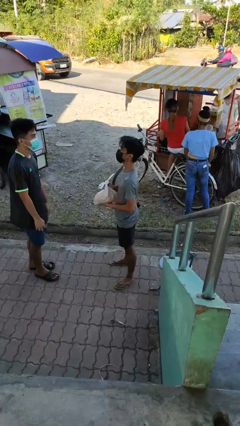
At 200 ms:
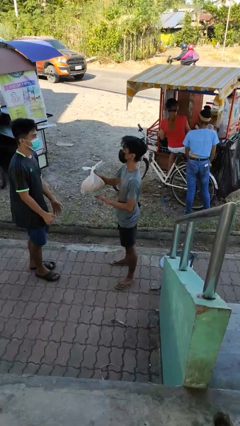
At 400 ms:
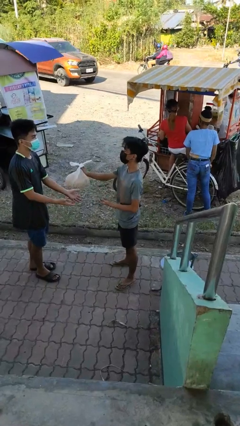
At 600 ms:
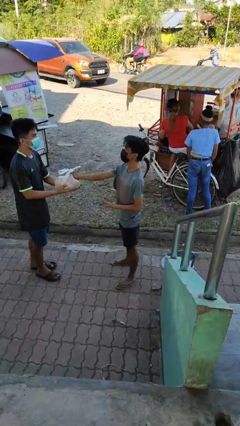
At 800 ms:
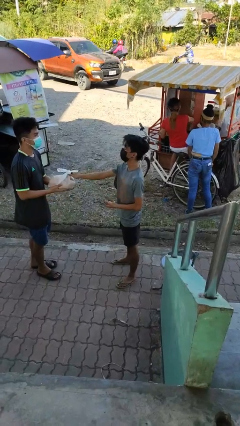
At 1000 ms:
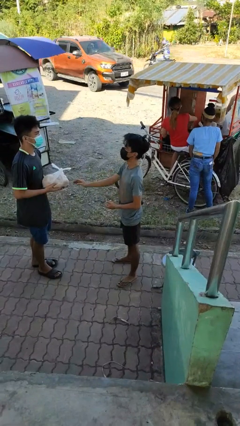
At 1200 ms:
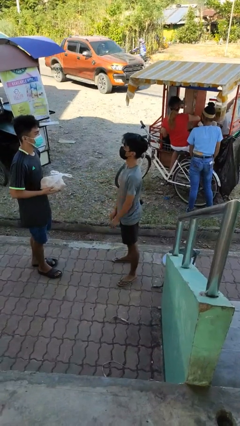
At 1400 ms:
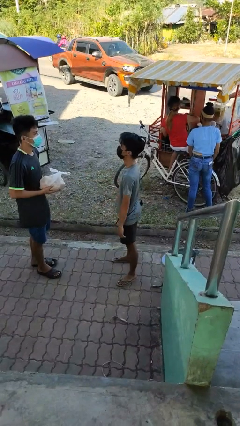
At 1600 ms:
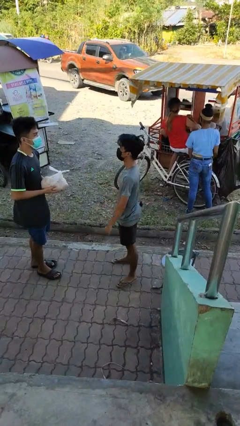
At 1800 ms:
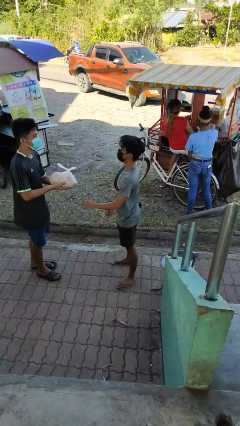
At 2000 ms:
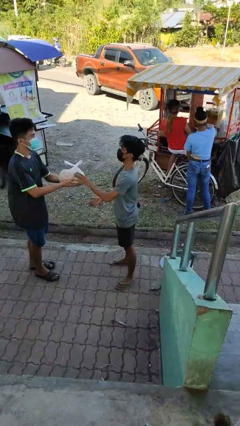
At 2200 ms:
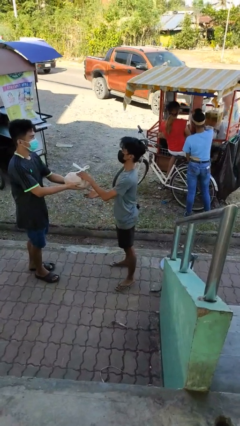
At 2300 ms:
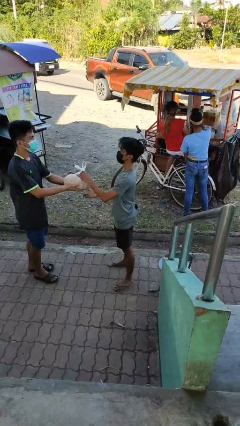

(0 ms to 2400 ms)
person transfers object to person

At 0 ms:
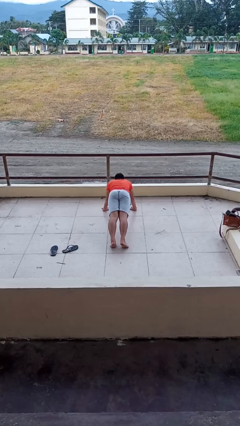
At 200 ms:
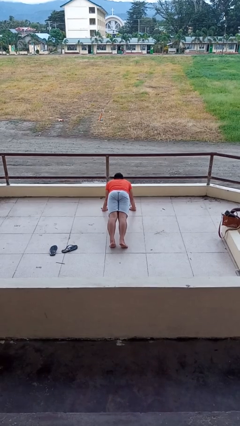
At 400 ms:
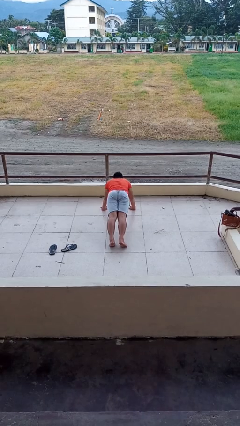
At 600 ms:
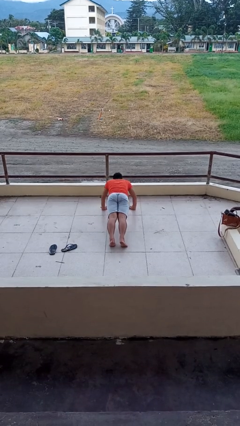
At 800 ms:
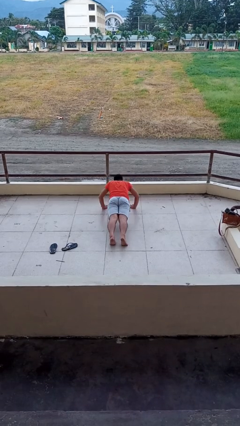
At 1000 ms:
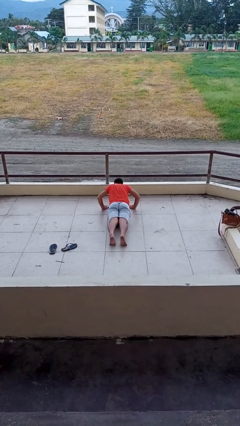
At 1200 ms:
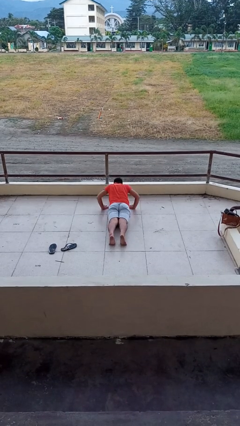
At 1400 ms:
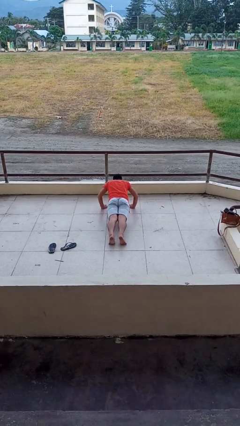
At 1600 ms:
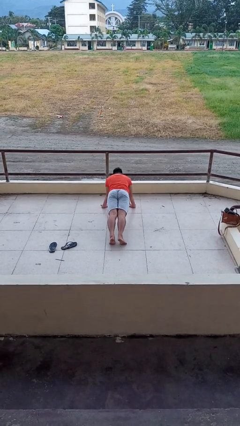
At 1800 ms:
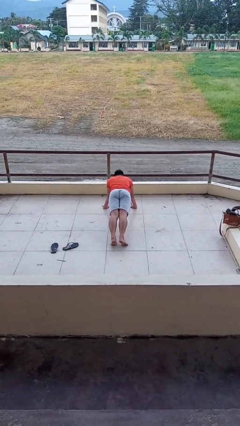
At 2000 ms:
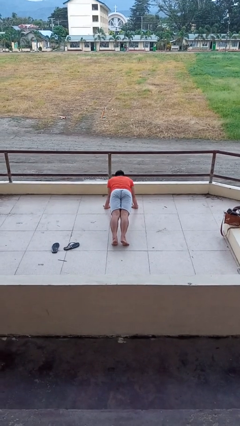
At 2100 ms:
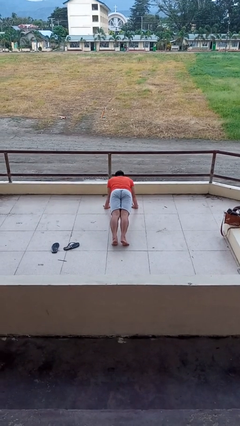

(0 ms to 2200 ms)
person exercises with pushup

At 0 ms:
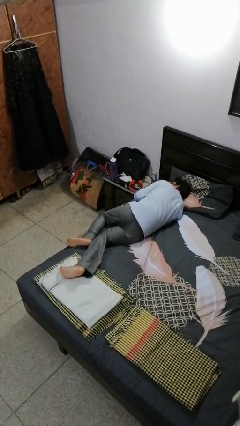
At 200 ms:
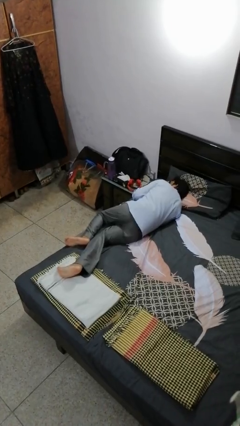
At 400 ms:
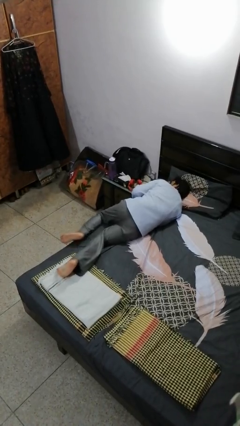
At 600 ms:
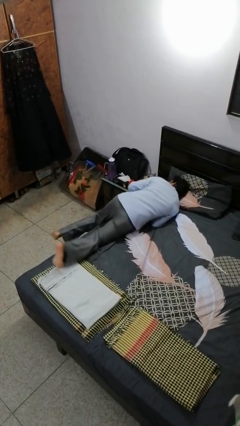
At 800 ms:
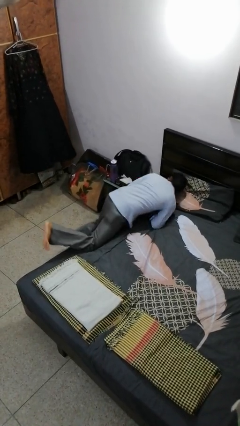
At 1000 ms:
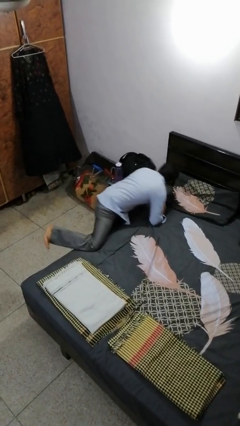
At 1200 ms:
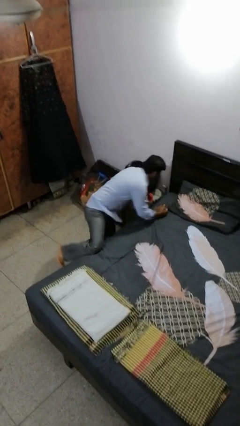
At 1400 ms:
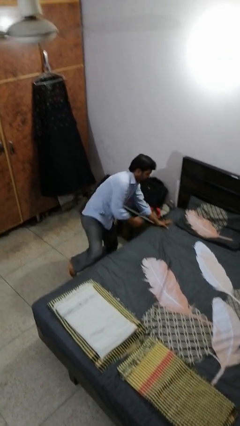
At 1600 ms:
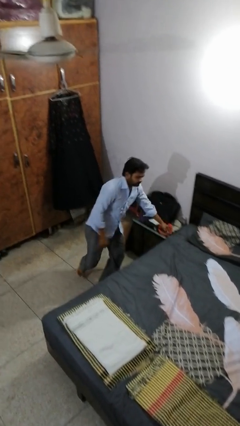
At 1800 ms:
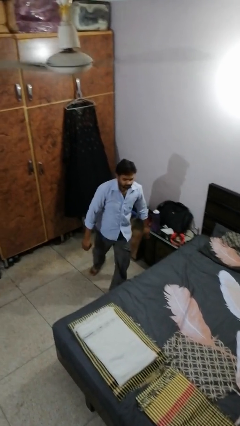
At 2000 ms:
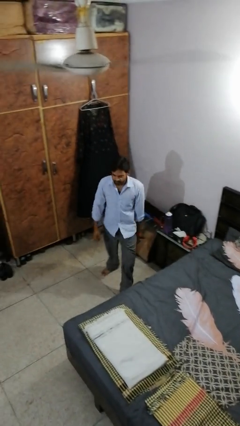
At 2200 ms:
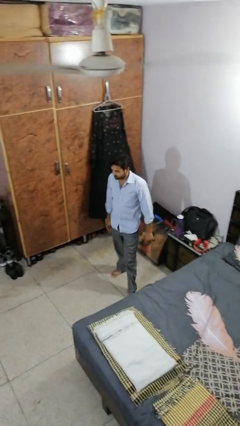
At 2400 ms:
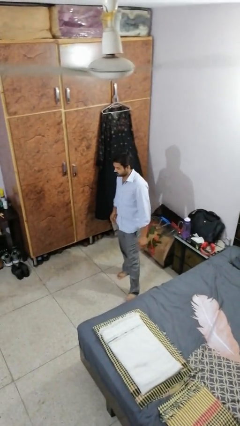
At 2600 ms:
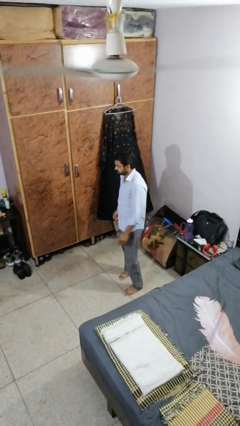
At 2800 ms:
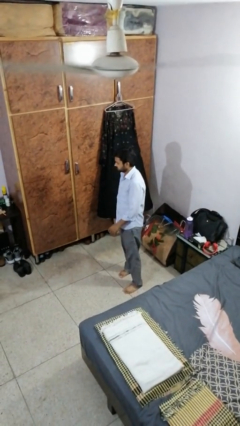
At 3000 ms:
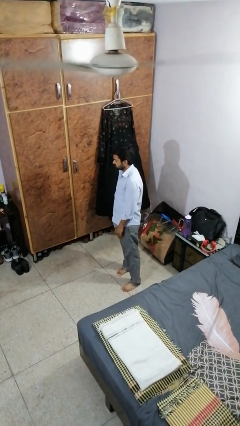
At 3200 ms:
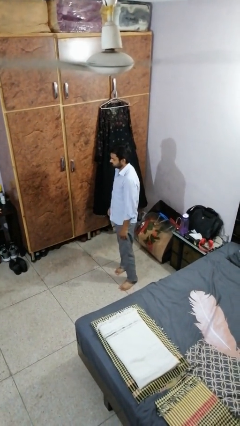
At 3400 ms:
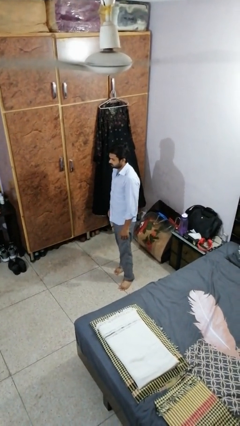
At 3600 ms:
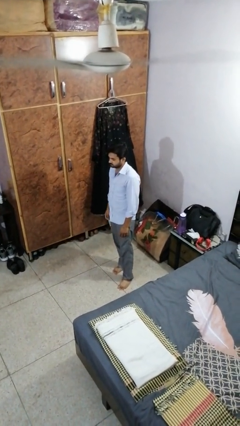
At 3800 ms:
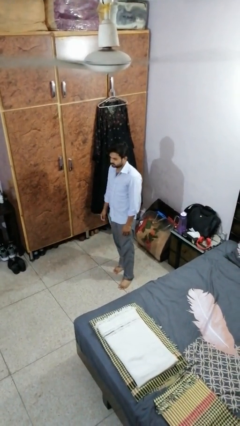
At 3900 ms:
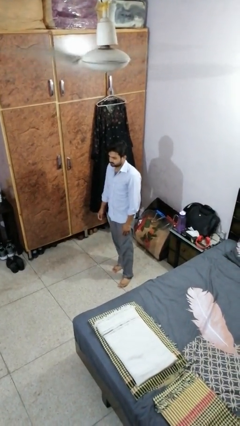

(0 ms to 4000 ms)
person stands up

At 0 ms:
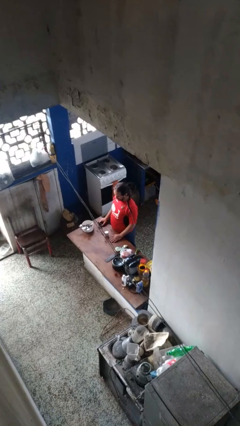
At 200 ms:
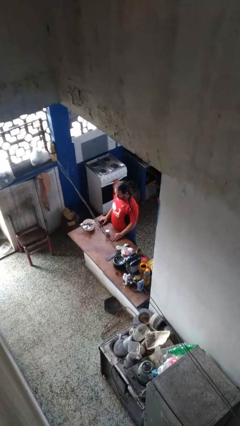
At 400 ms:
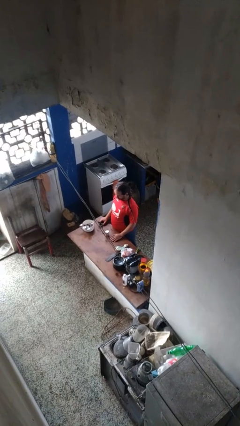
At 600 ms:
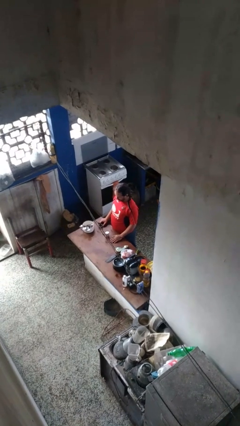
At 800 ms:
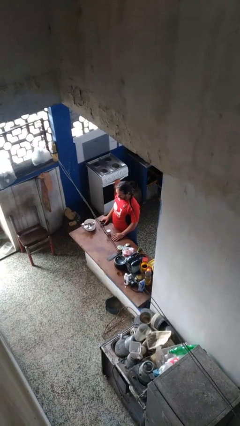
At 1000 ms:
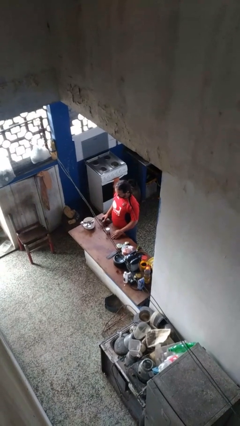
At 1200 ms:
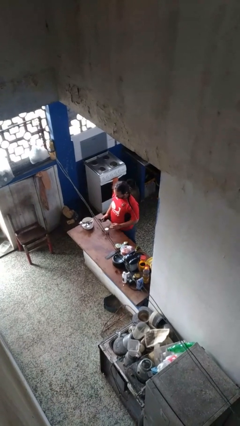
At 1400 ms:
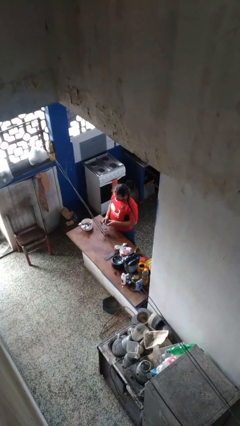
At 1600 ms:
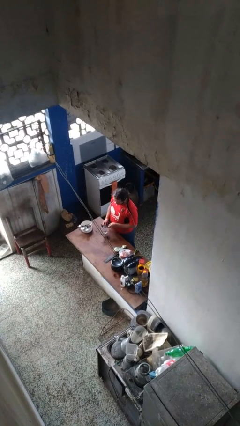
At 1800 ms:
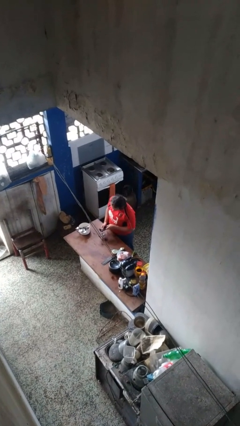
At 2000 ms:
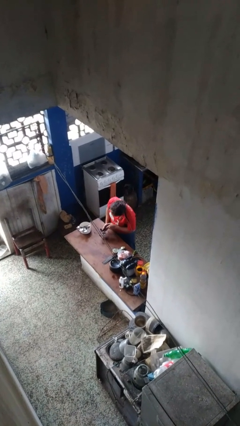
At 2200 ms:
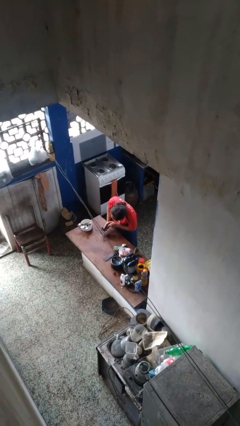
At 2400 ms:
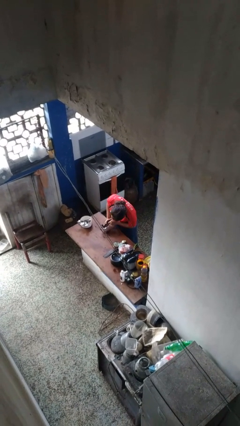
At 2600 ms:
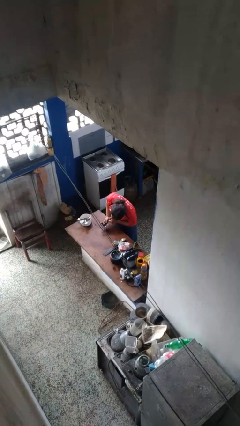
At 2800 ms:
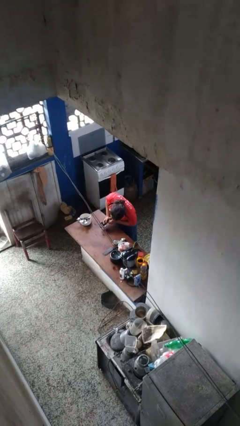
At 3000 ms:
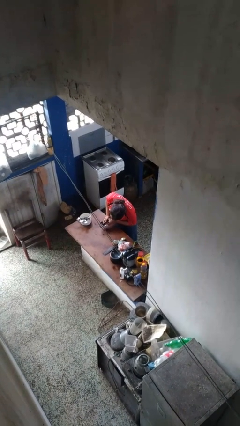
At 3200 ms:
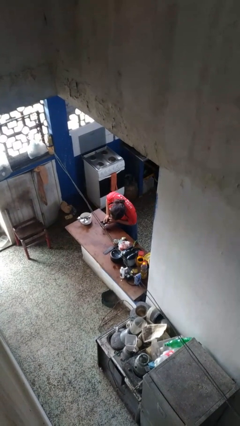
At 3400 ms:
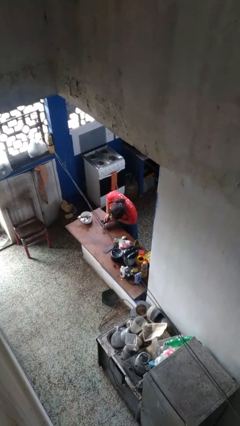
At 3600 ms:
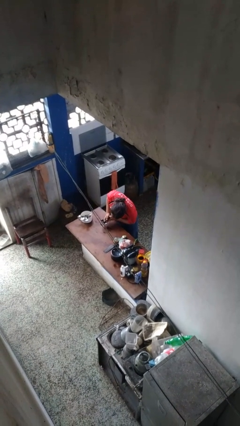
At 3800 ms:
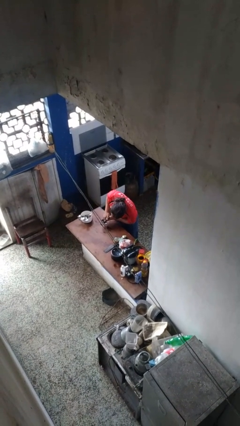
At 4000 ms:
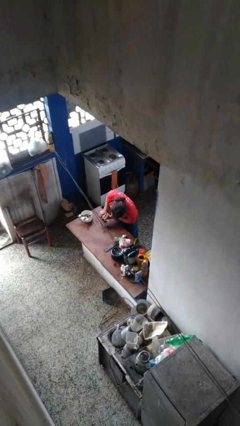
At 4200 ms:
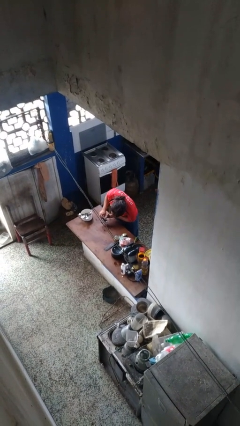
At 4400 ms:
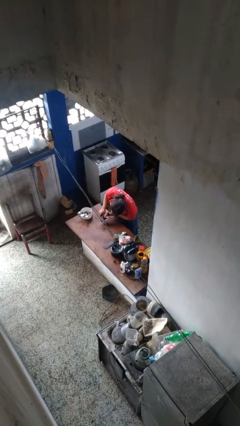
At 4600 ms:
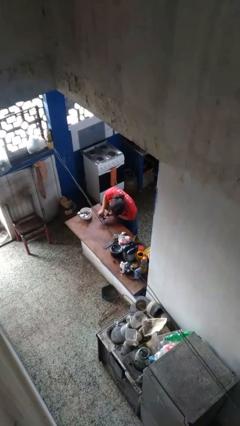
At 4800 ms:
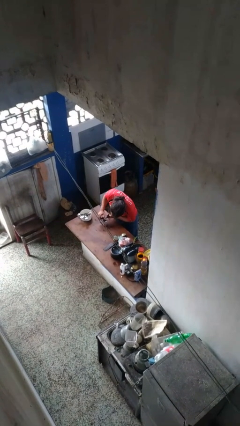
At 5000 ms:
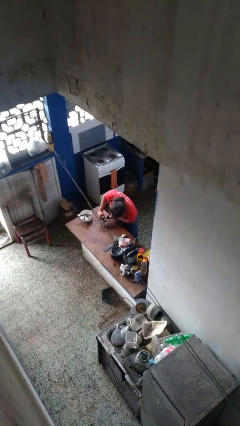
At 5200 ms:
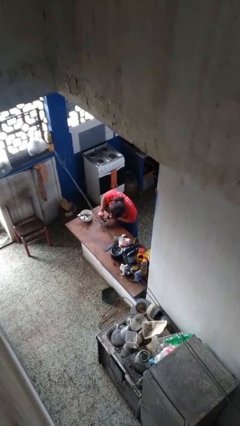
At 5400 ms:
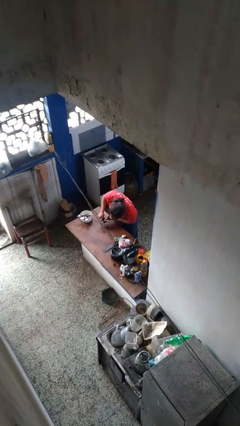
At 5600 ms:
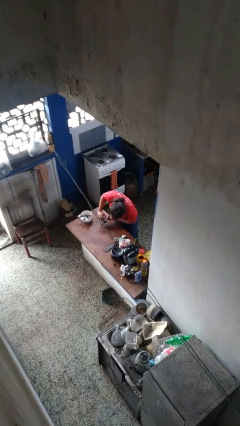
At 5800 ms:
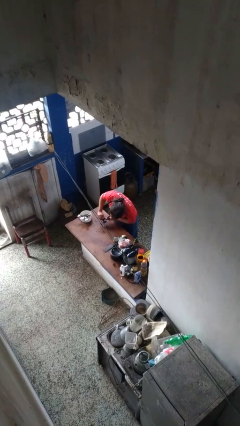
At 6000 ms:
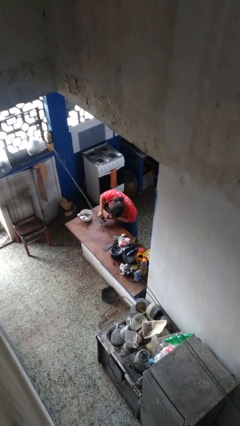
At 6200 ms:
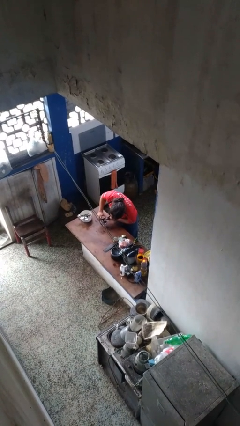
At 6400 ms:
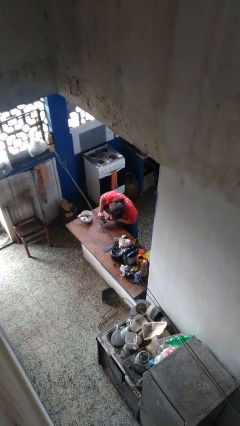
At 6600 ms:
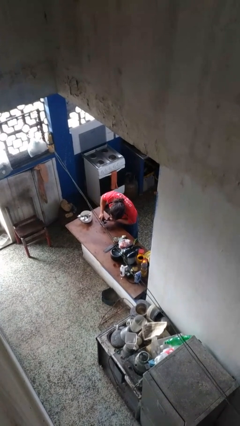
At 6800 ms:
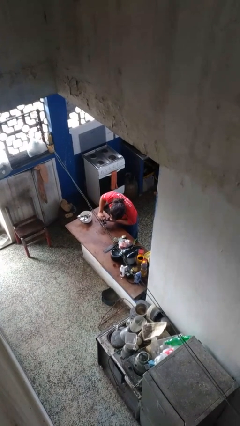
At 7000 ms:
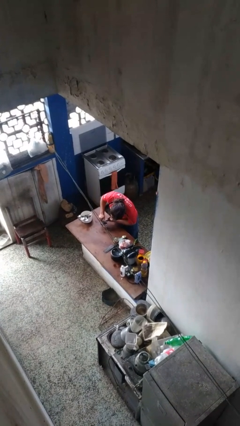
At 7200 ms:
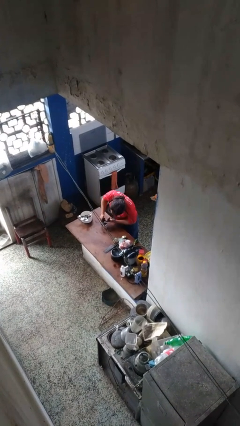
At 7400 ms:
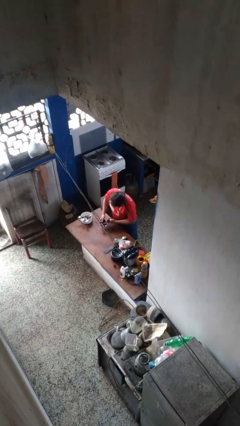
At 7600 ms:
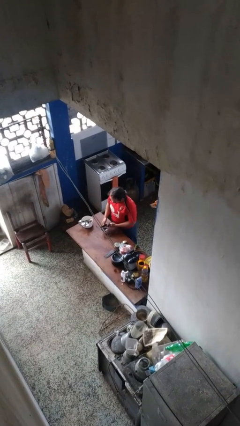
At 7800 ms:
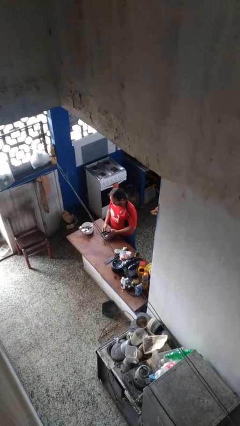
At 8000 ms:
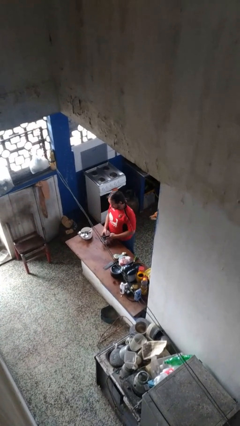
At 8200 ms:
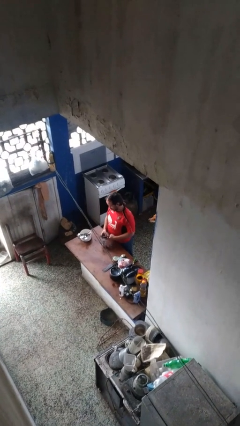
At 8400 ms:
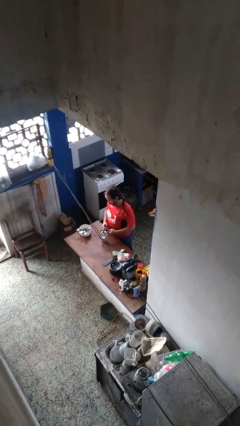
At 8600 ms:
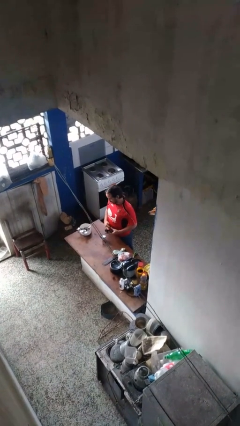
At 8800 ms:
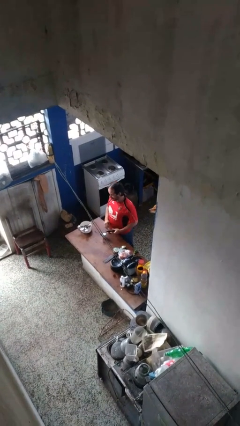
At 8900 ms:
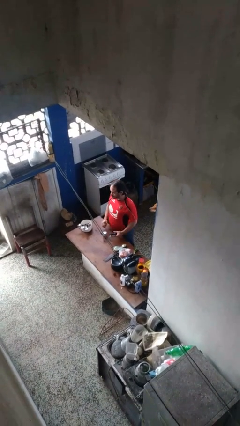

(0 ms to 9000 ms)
person opens can with can opener

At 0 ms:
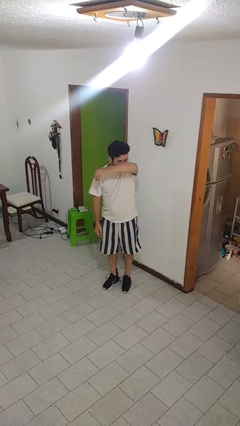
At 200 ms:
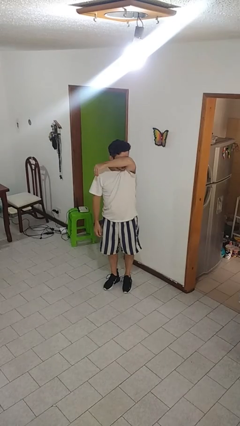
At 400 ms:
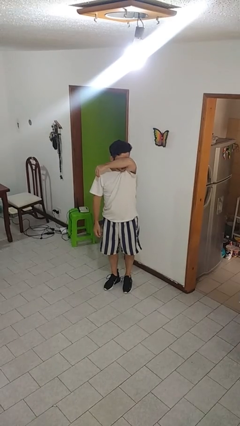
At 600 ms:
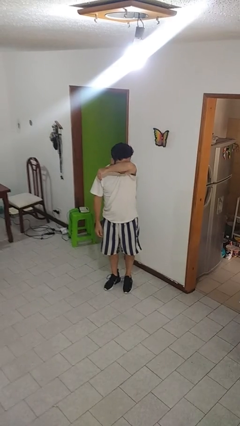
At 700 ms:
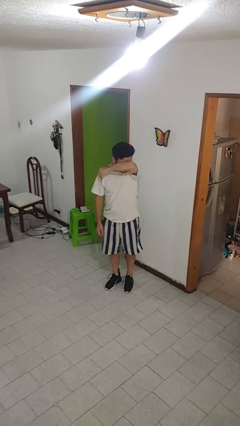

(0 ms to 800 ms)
person sneezes into arm
